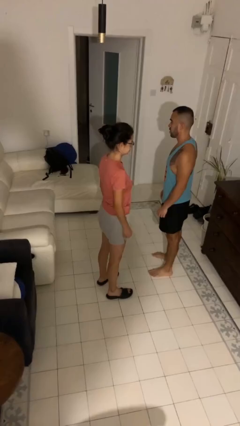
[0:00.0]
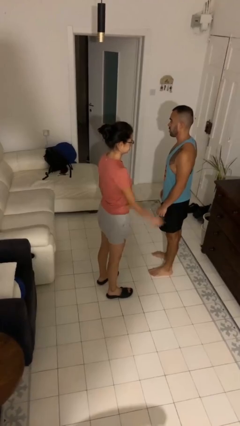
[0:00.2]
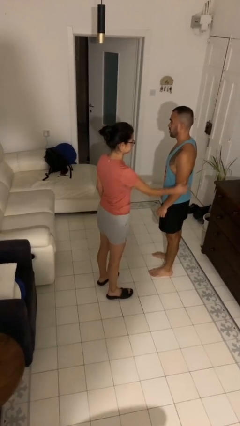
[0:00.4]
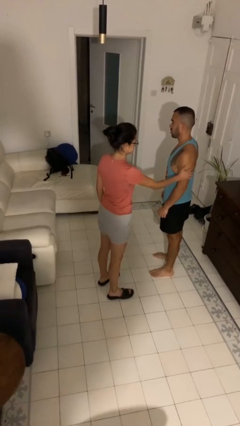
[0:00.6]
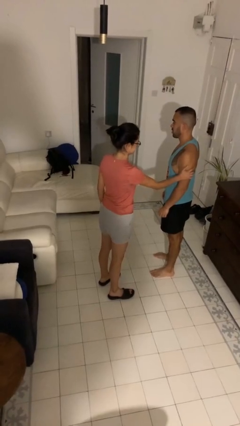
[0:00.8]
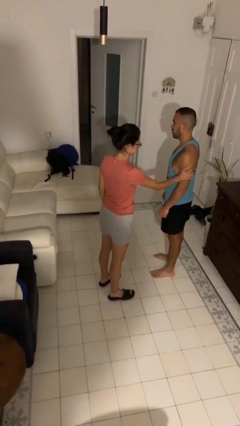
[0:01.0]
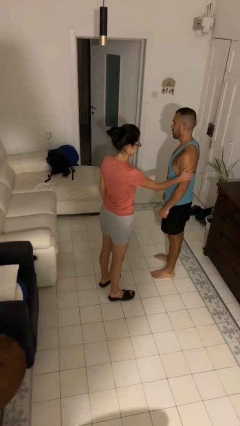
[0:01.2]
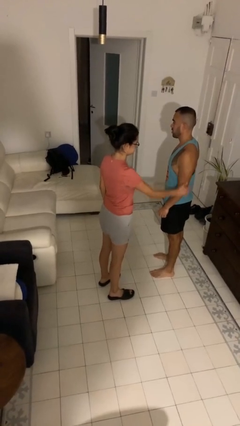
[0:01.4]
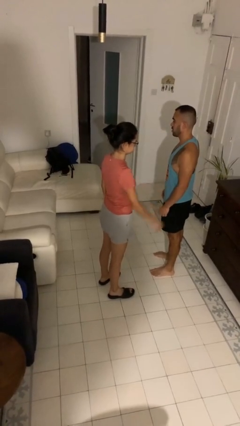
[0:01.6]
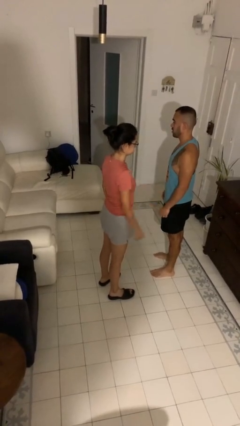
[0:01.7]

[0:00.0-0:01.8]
person grabs person by bicep

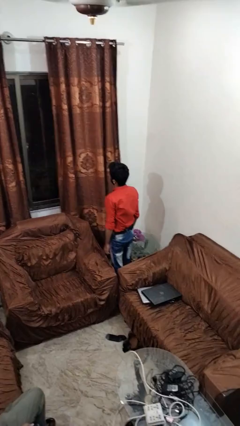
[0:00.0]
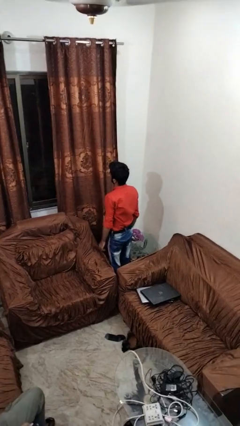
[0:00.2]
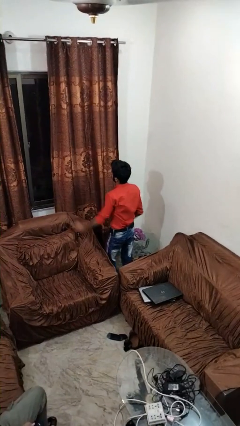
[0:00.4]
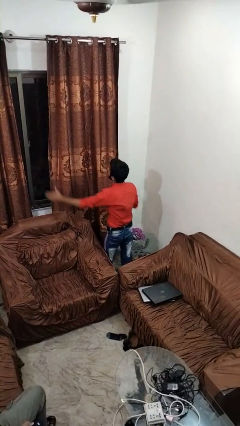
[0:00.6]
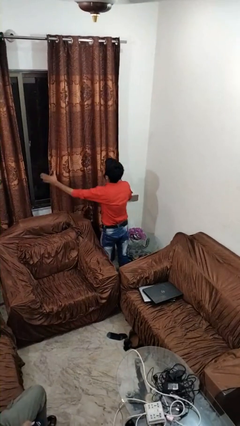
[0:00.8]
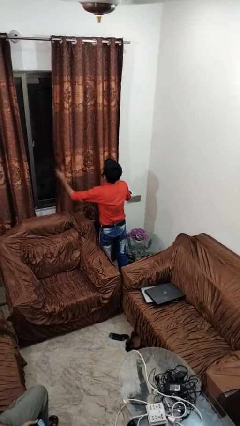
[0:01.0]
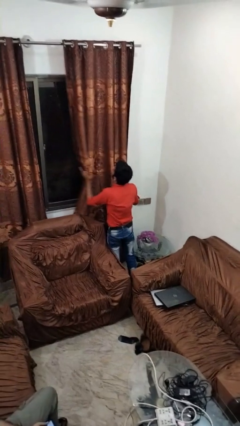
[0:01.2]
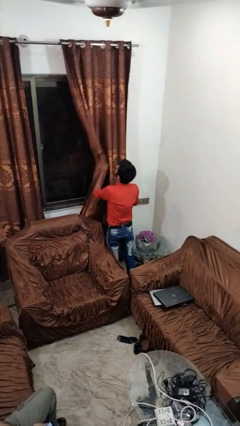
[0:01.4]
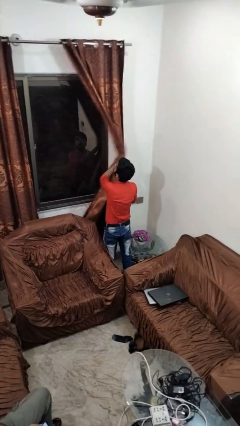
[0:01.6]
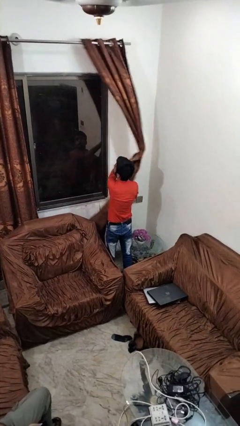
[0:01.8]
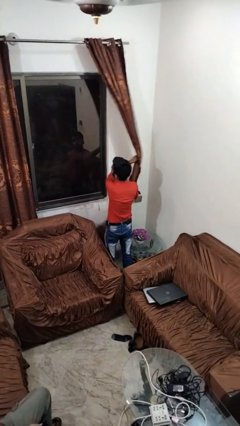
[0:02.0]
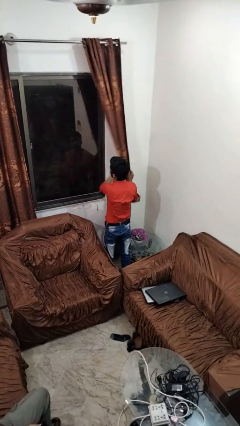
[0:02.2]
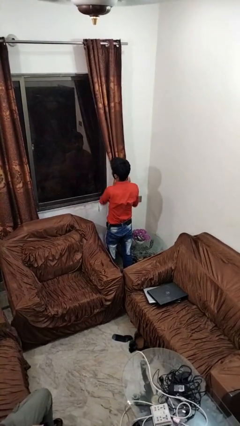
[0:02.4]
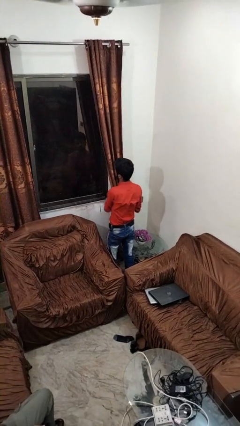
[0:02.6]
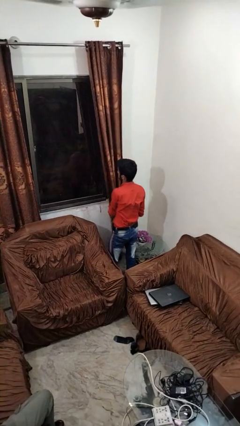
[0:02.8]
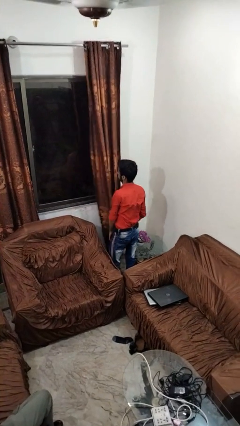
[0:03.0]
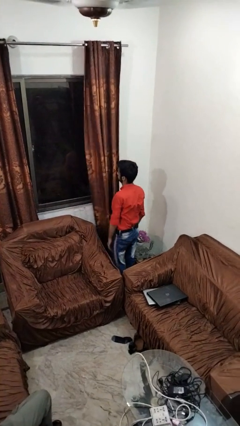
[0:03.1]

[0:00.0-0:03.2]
person opens curtains

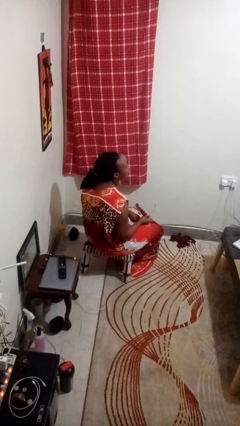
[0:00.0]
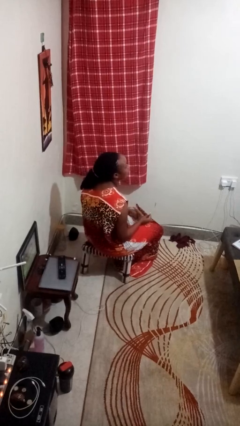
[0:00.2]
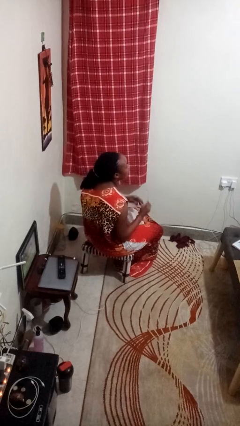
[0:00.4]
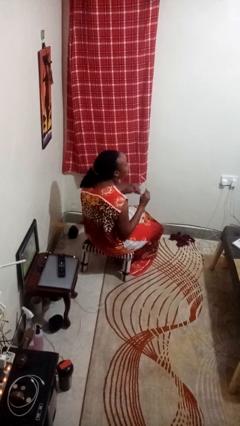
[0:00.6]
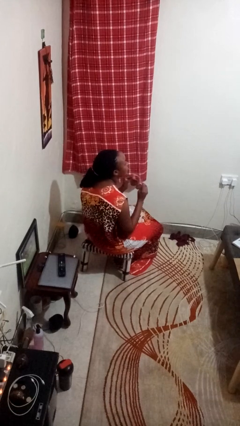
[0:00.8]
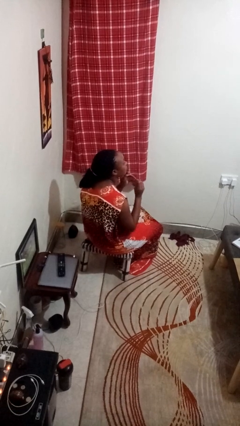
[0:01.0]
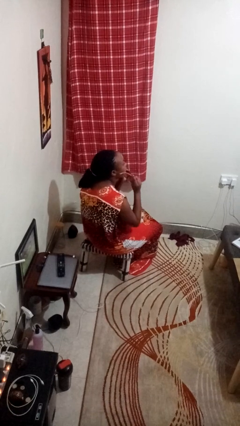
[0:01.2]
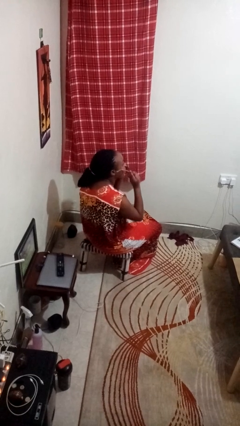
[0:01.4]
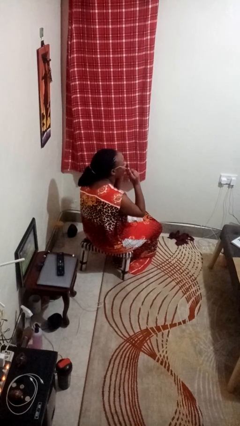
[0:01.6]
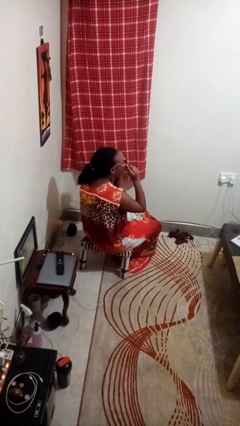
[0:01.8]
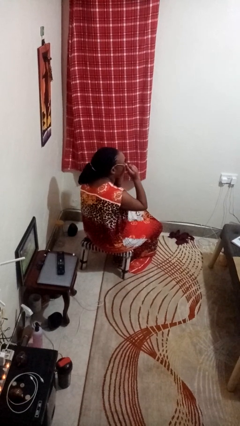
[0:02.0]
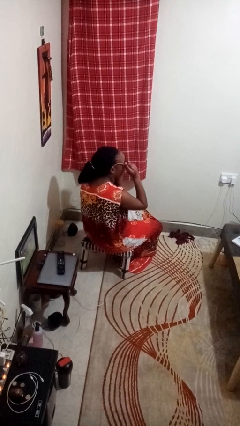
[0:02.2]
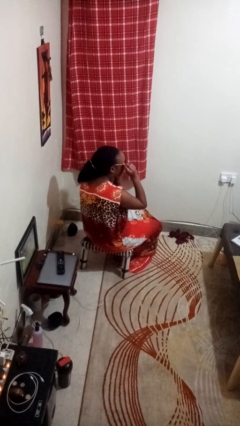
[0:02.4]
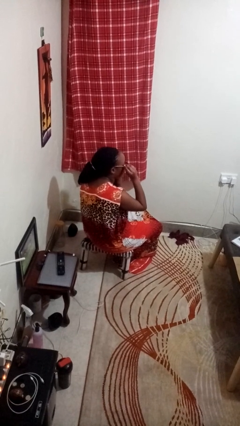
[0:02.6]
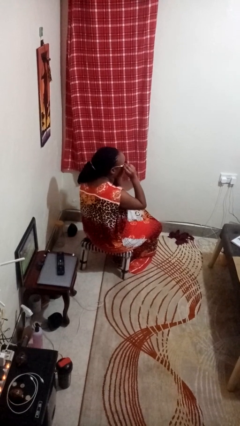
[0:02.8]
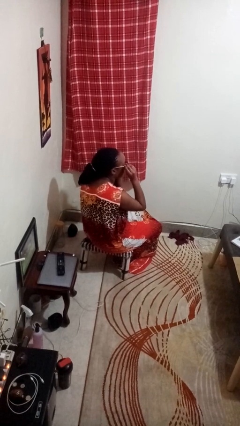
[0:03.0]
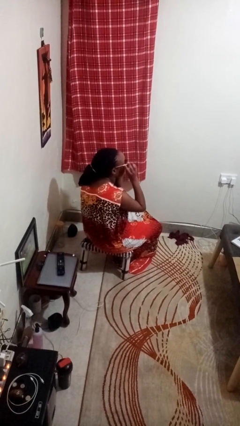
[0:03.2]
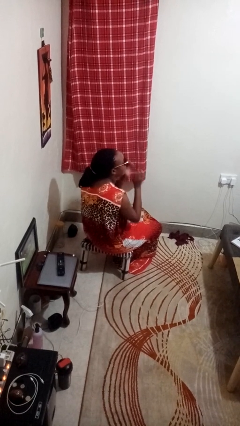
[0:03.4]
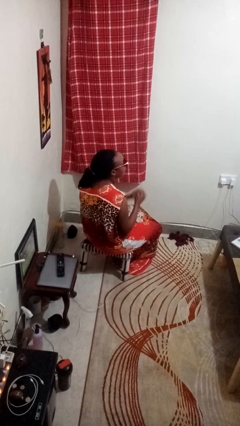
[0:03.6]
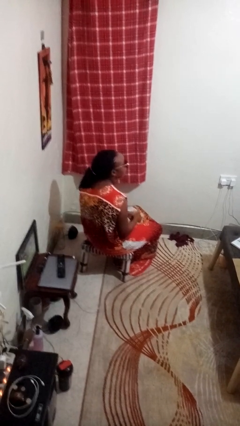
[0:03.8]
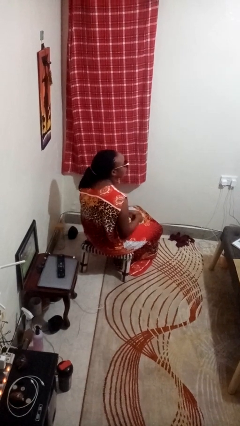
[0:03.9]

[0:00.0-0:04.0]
person puts on sunglasses

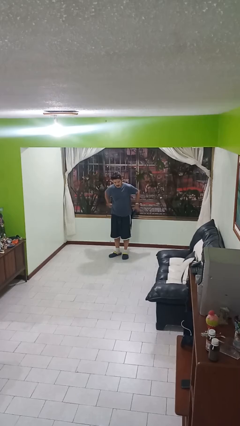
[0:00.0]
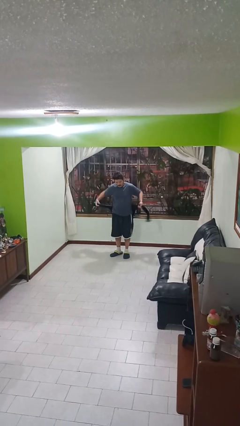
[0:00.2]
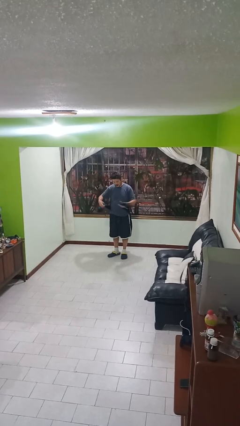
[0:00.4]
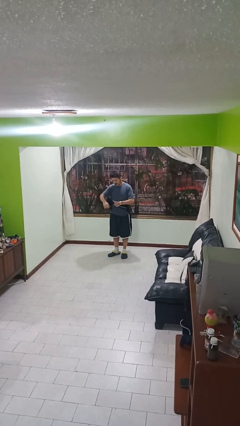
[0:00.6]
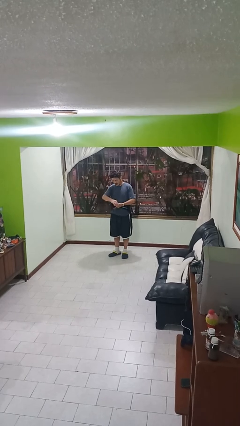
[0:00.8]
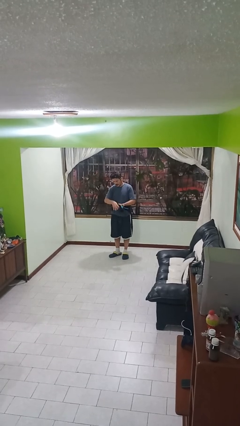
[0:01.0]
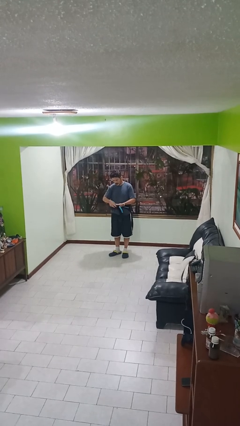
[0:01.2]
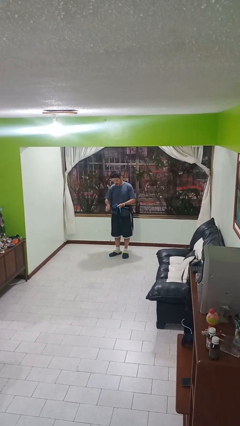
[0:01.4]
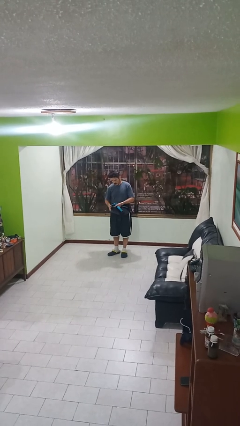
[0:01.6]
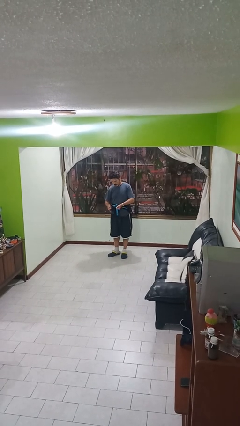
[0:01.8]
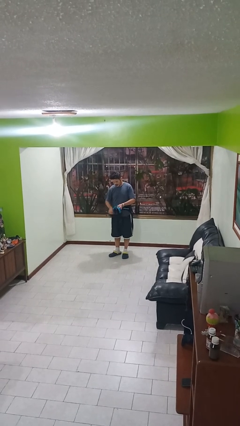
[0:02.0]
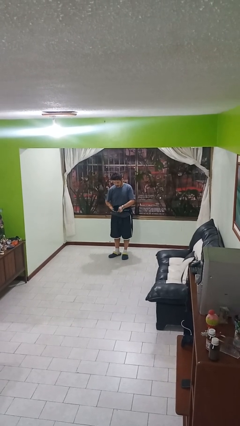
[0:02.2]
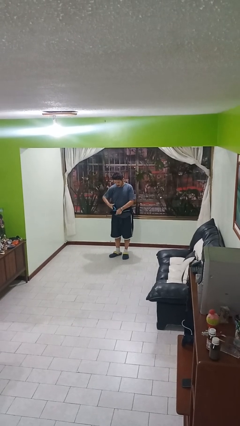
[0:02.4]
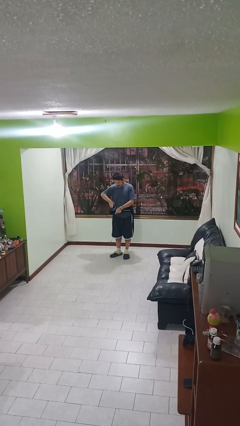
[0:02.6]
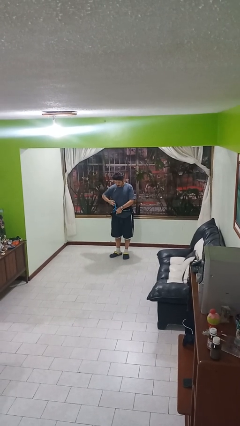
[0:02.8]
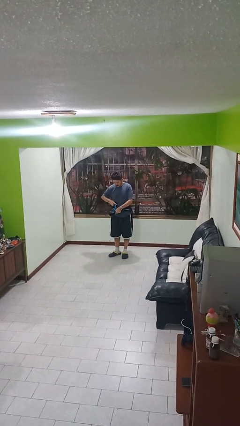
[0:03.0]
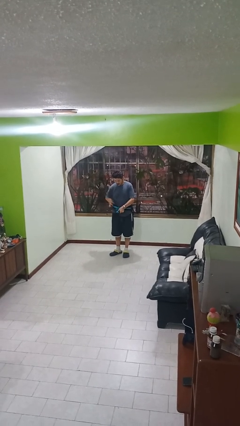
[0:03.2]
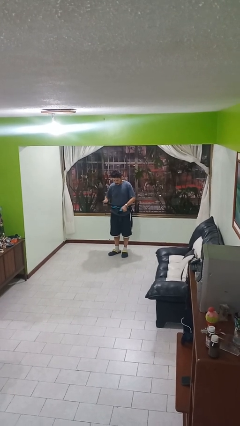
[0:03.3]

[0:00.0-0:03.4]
person ties jacket around waist

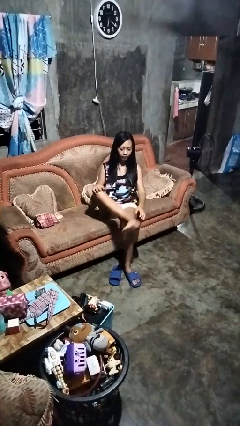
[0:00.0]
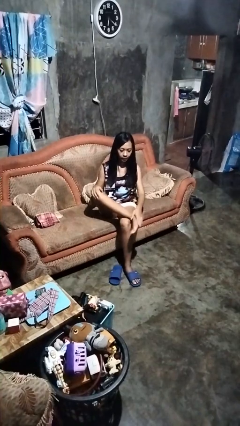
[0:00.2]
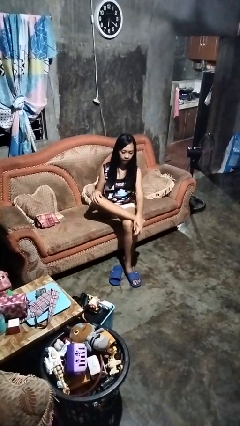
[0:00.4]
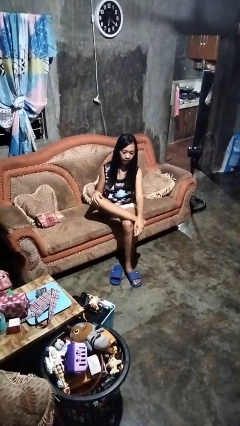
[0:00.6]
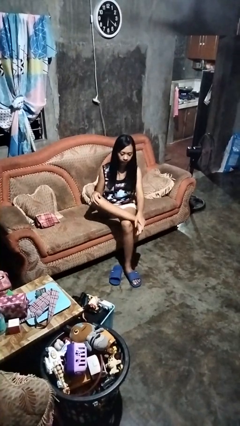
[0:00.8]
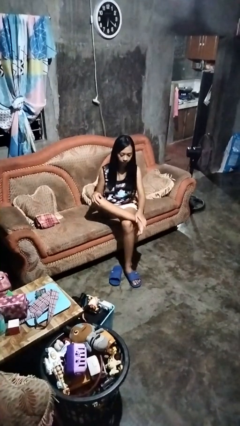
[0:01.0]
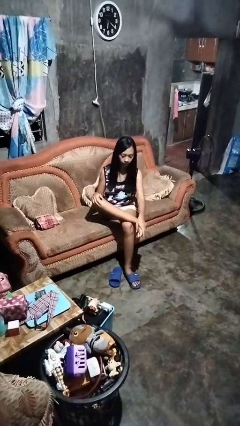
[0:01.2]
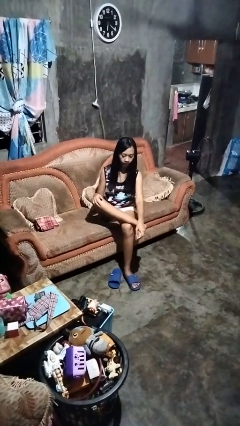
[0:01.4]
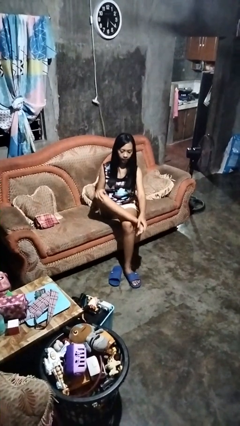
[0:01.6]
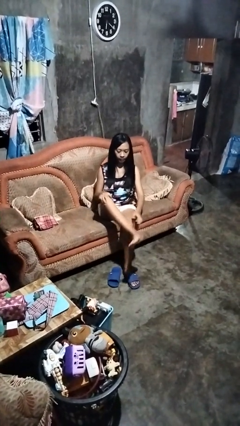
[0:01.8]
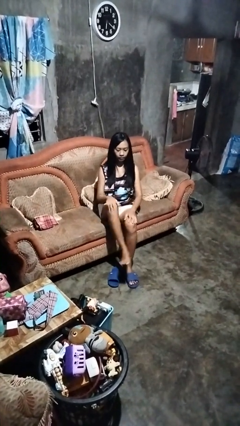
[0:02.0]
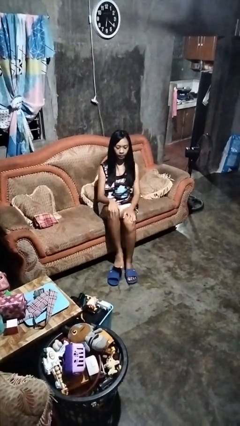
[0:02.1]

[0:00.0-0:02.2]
person rubs foot

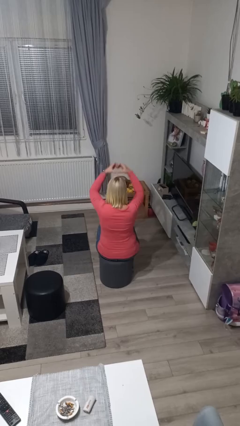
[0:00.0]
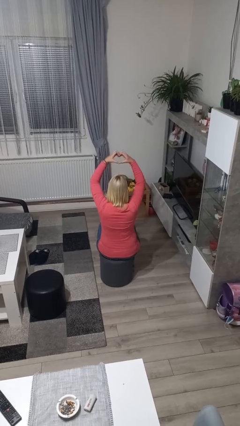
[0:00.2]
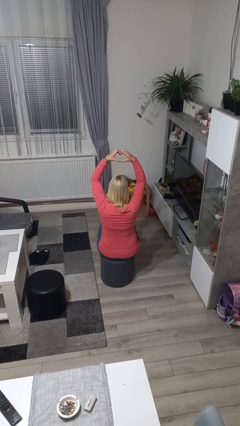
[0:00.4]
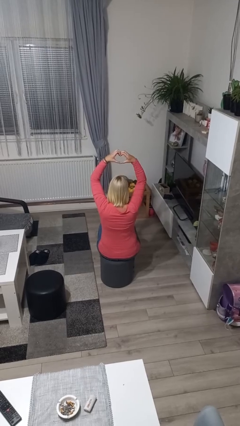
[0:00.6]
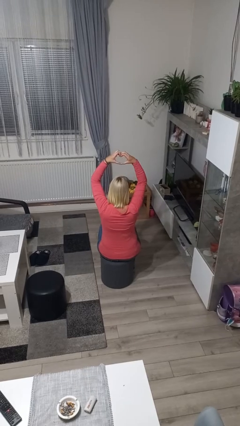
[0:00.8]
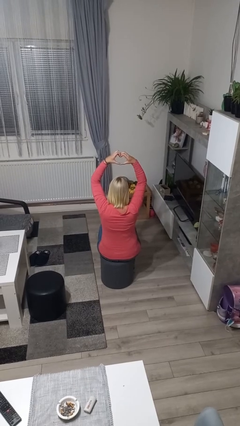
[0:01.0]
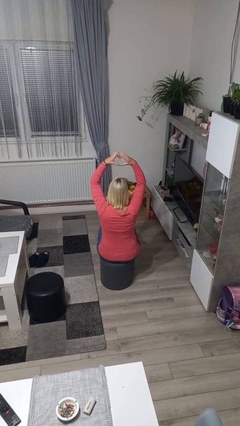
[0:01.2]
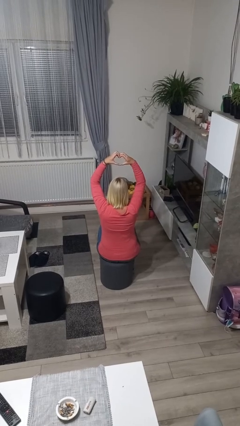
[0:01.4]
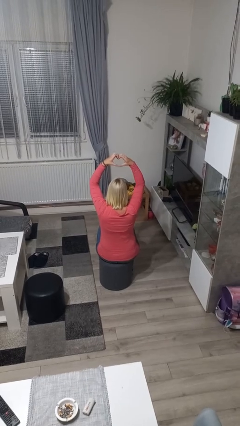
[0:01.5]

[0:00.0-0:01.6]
person gestures heart

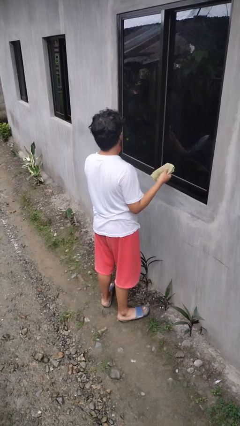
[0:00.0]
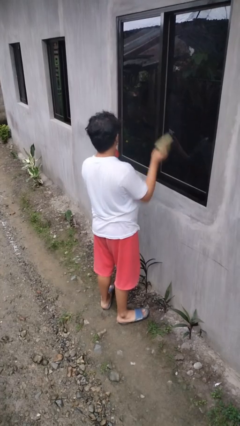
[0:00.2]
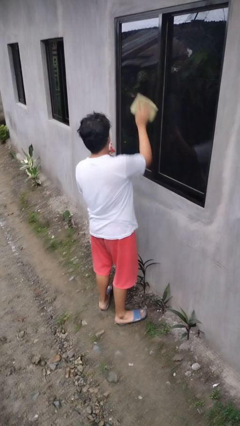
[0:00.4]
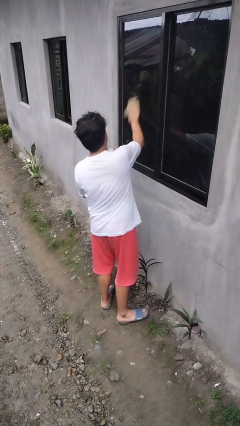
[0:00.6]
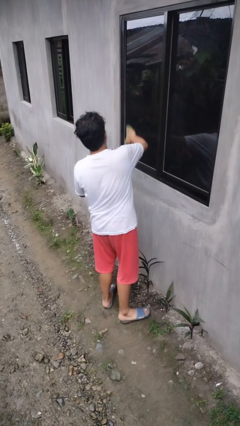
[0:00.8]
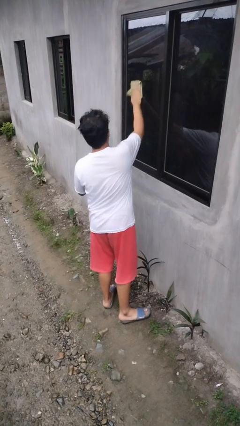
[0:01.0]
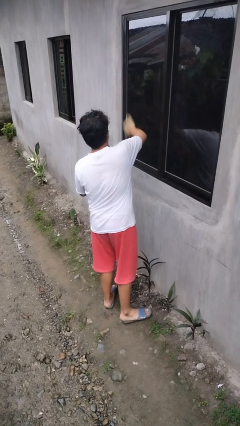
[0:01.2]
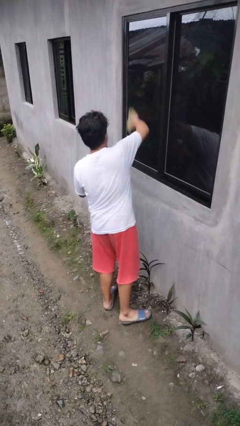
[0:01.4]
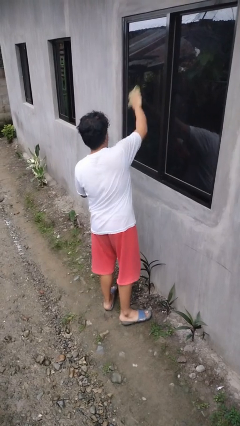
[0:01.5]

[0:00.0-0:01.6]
person washes window
